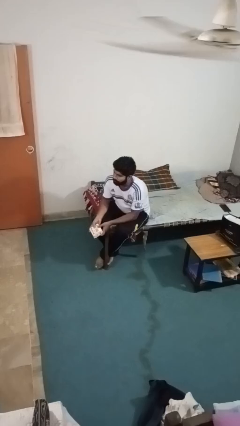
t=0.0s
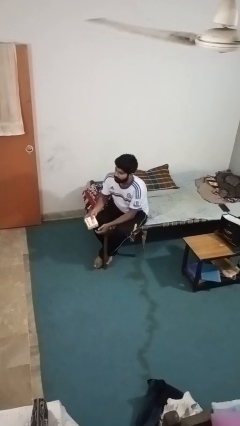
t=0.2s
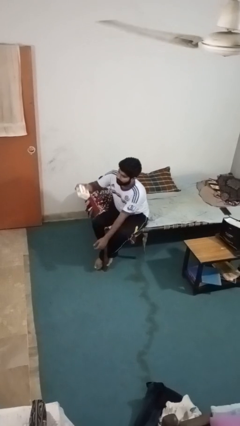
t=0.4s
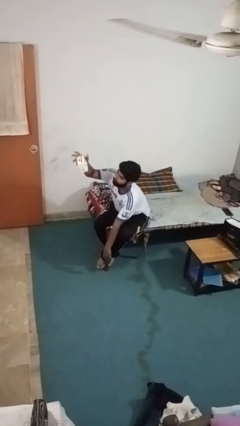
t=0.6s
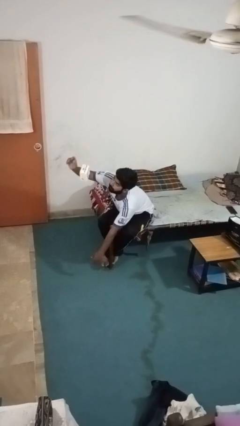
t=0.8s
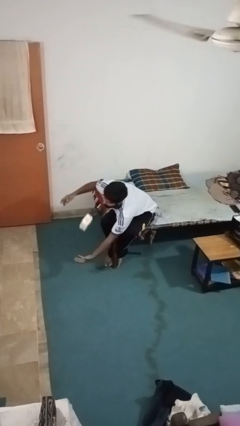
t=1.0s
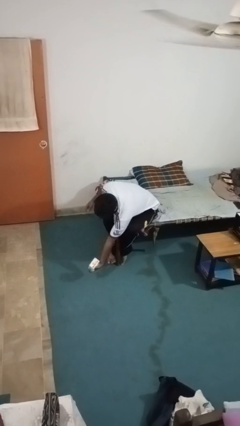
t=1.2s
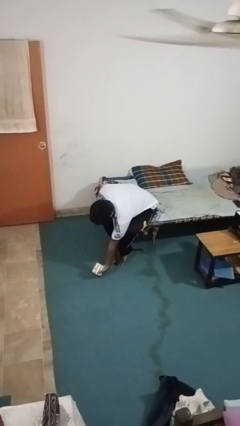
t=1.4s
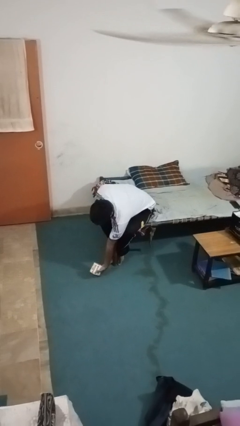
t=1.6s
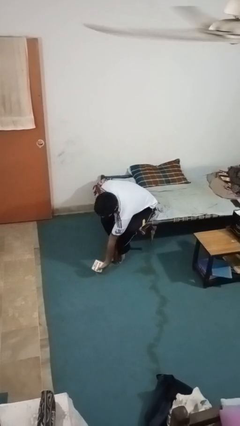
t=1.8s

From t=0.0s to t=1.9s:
person drops object

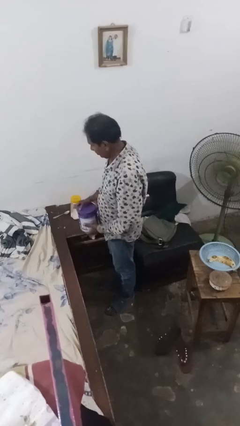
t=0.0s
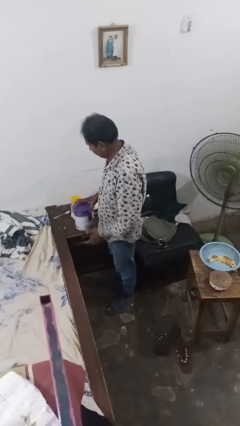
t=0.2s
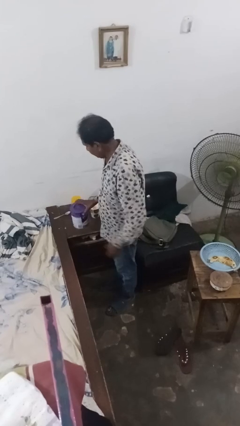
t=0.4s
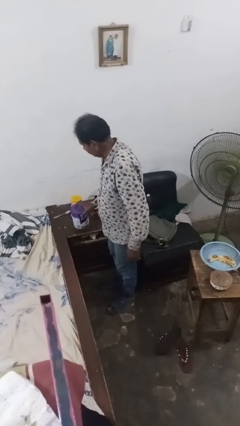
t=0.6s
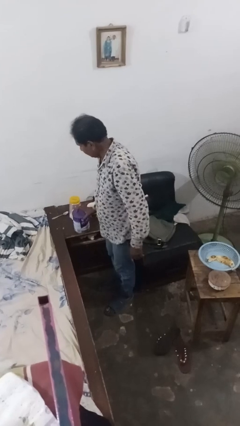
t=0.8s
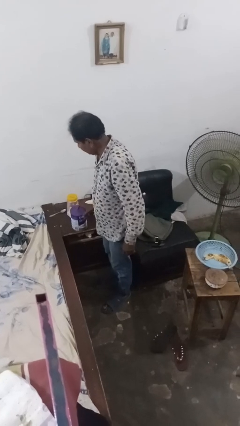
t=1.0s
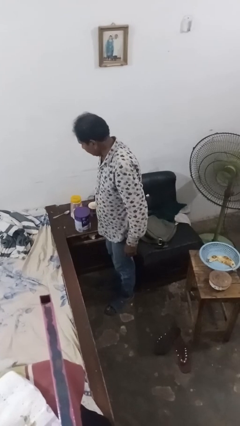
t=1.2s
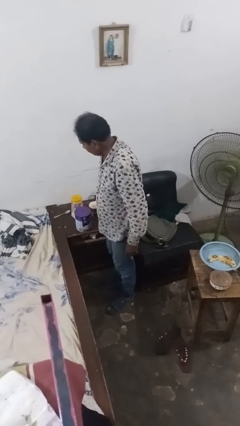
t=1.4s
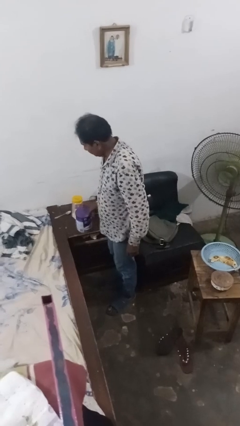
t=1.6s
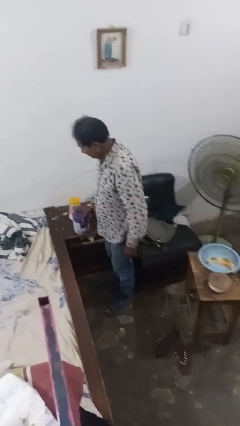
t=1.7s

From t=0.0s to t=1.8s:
person puts down object on bed

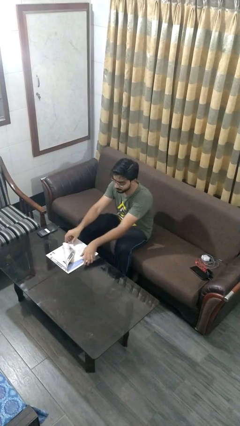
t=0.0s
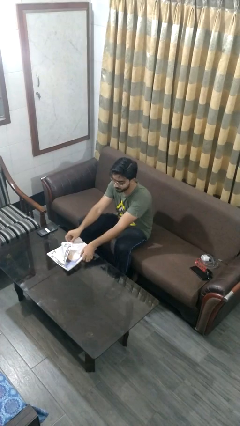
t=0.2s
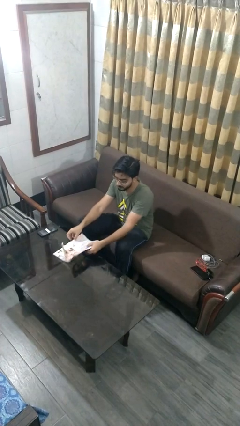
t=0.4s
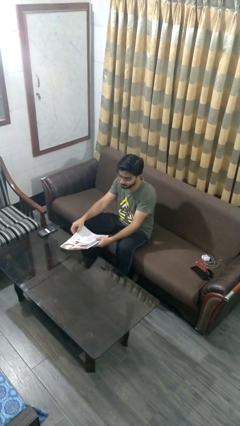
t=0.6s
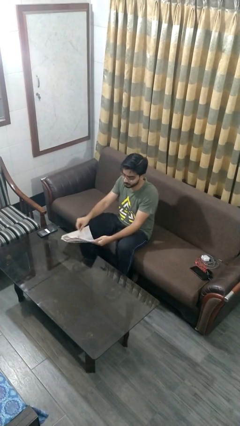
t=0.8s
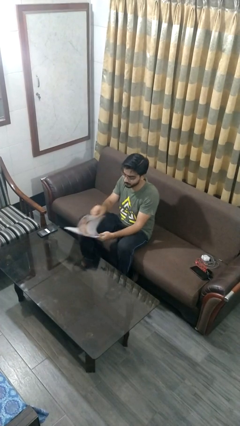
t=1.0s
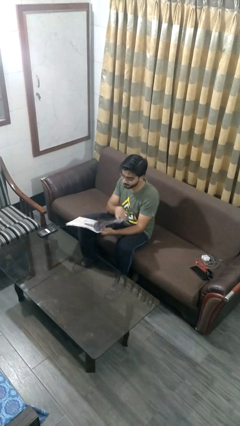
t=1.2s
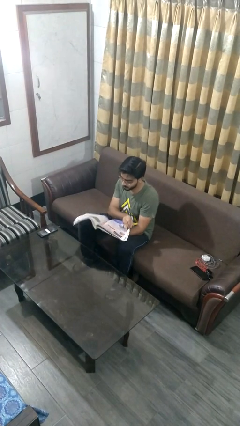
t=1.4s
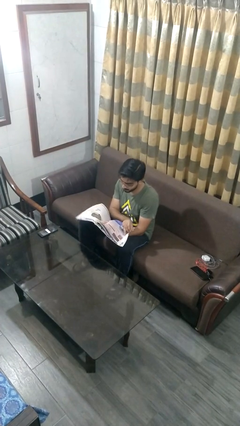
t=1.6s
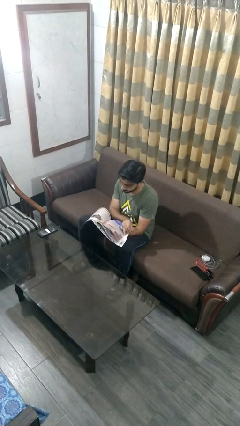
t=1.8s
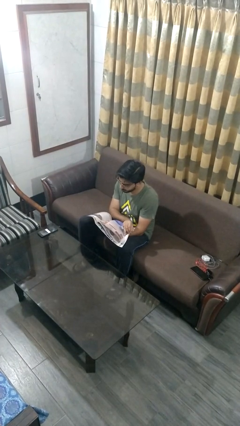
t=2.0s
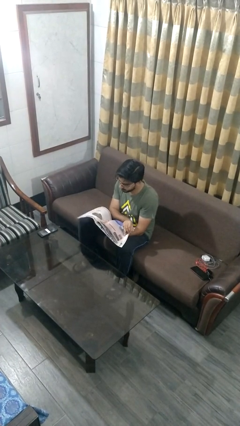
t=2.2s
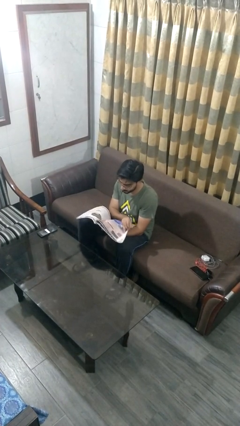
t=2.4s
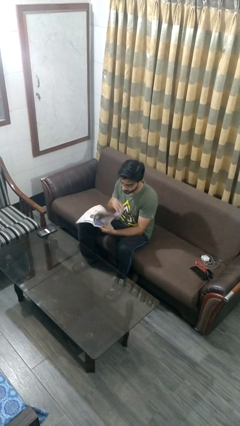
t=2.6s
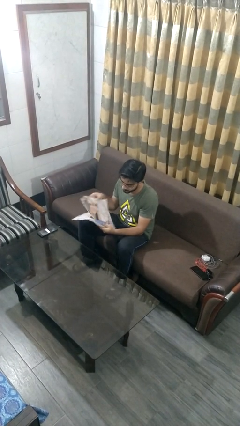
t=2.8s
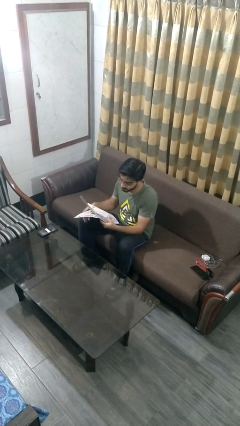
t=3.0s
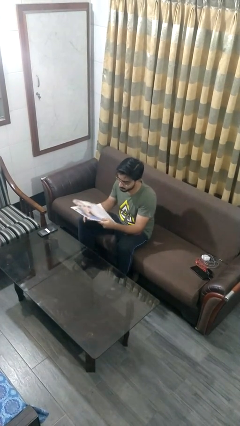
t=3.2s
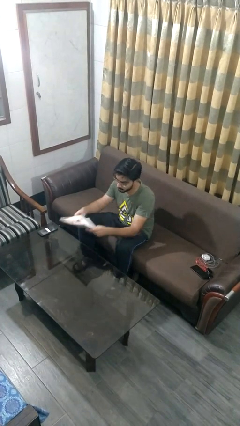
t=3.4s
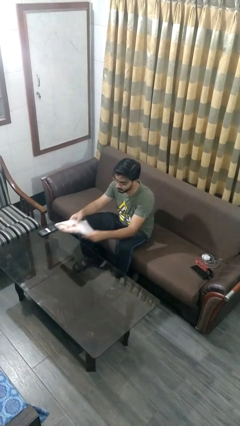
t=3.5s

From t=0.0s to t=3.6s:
person reads magazine

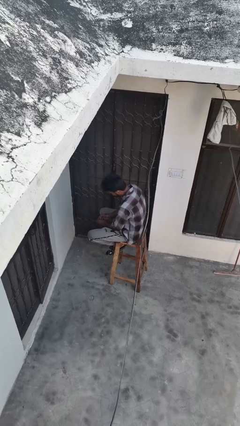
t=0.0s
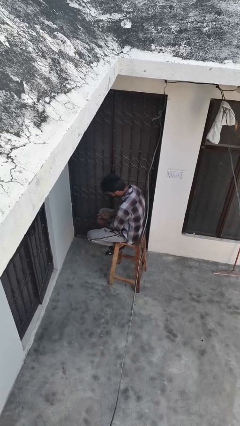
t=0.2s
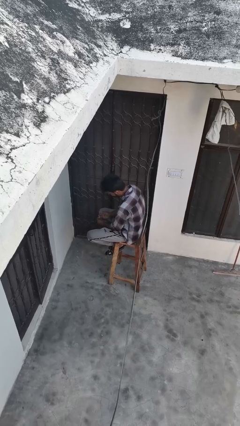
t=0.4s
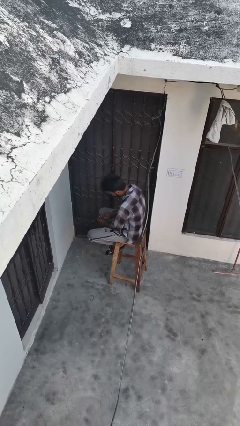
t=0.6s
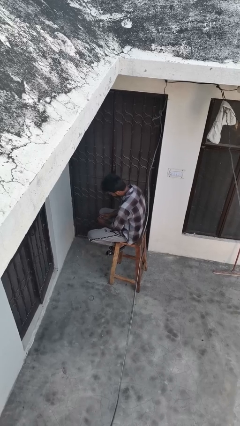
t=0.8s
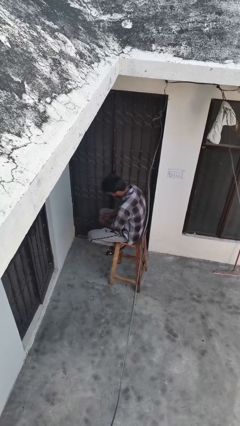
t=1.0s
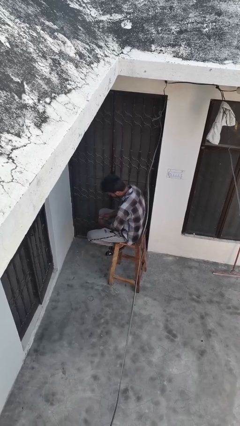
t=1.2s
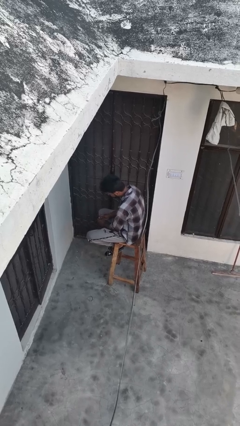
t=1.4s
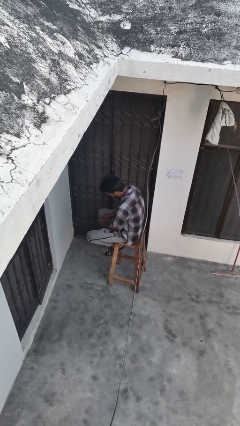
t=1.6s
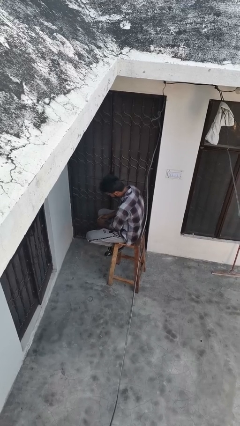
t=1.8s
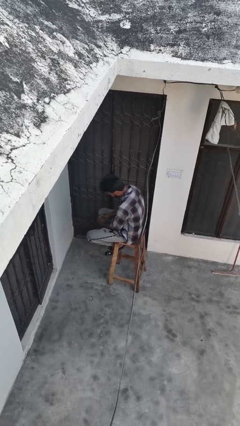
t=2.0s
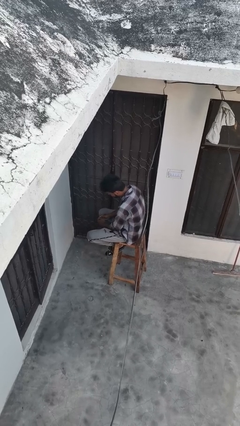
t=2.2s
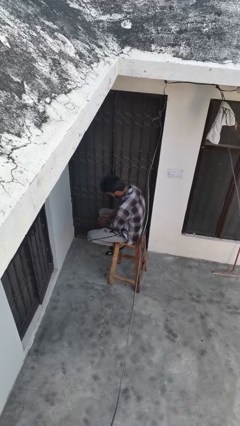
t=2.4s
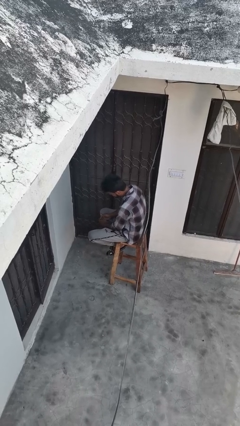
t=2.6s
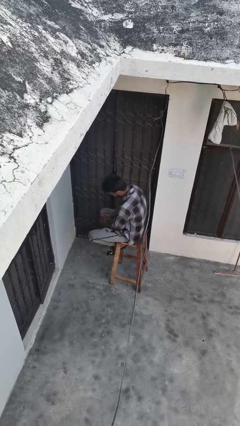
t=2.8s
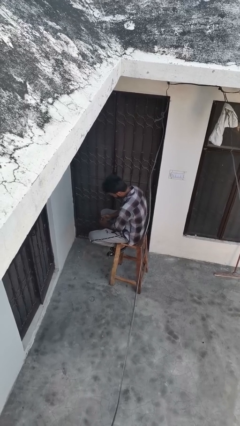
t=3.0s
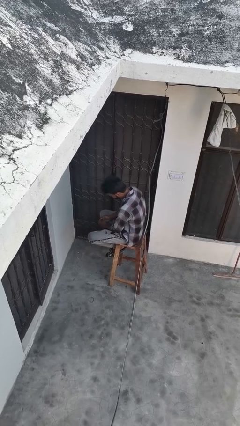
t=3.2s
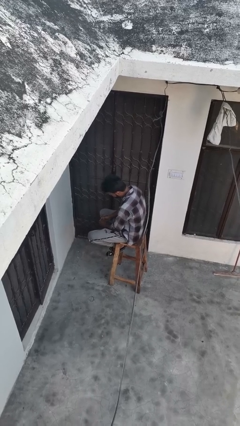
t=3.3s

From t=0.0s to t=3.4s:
person looks at hands in lap

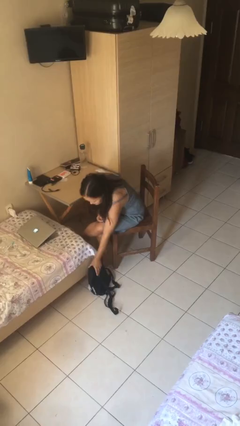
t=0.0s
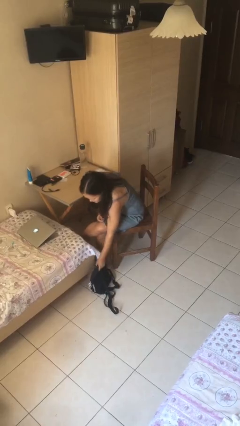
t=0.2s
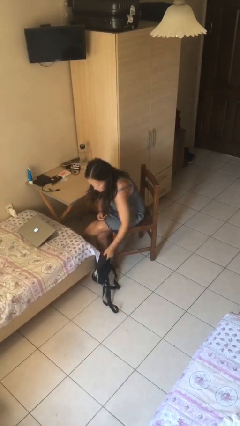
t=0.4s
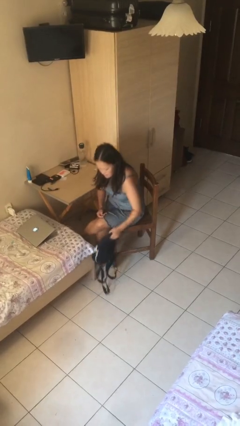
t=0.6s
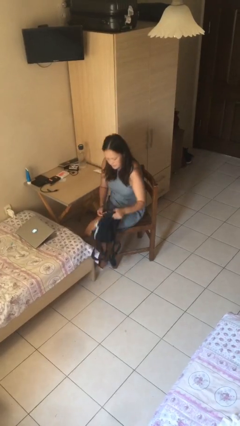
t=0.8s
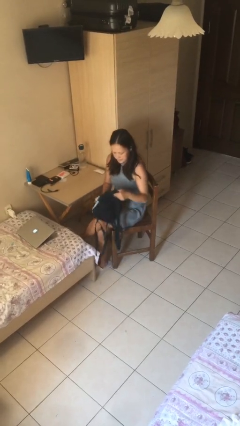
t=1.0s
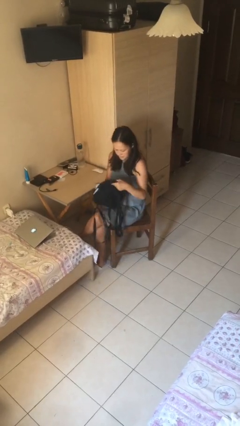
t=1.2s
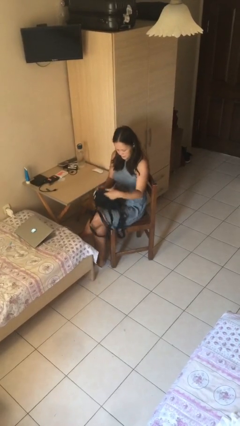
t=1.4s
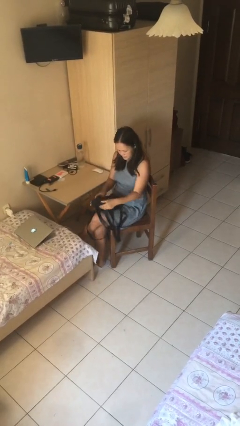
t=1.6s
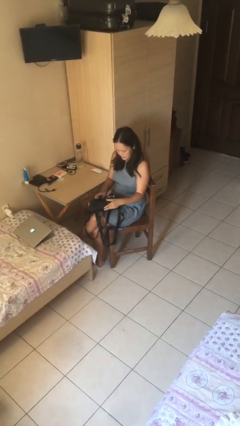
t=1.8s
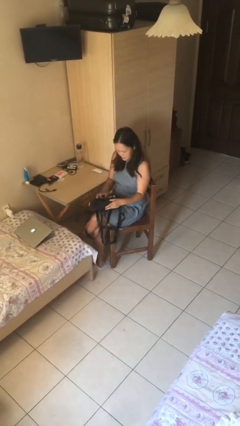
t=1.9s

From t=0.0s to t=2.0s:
person picks up object from floor

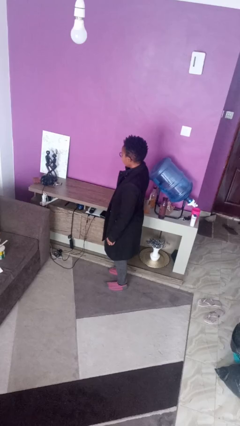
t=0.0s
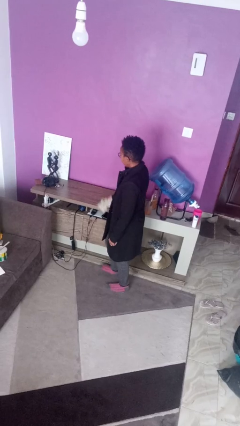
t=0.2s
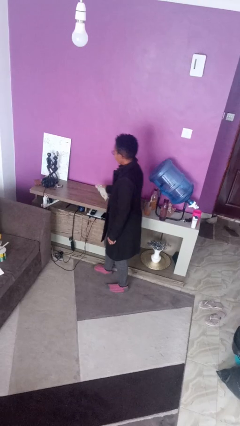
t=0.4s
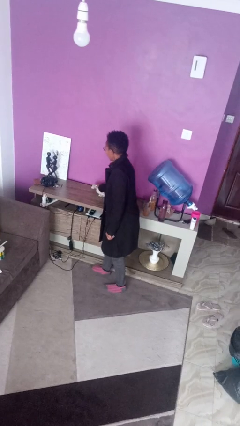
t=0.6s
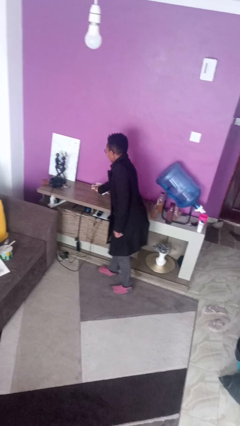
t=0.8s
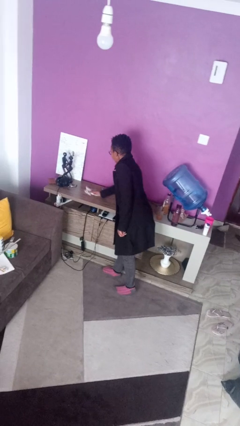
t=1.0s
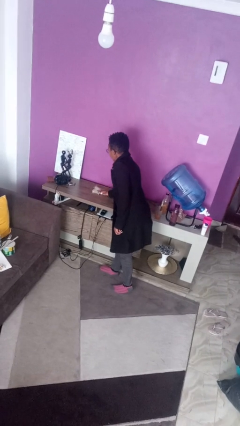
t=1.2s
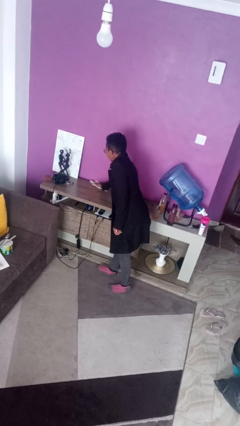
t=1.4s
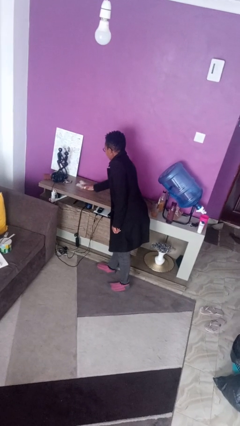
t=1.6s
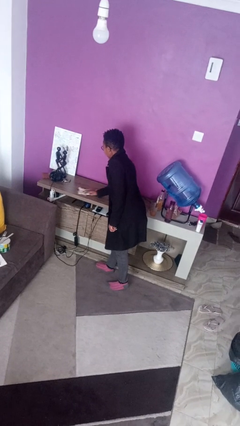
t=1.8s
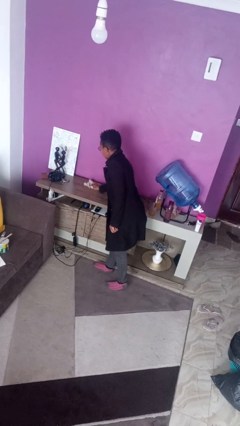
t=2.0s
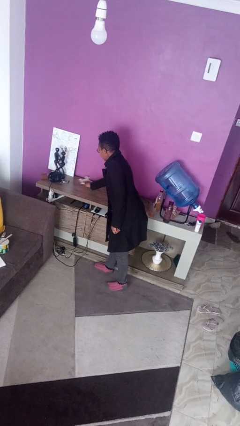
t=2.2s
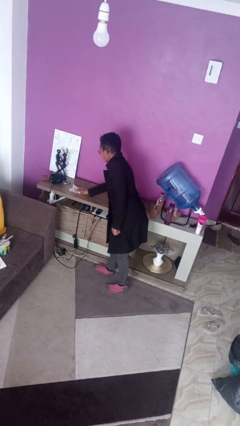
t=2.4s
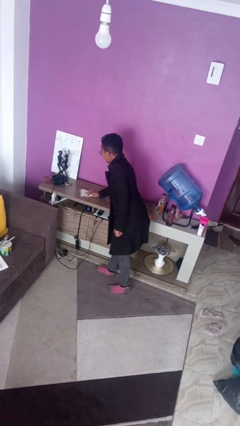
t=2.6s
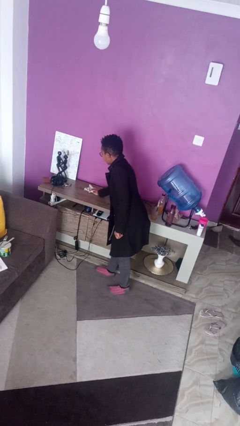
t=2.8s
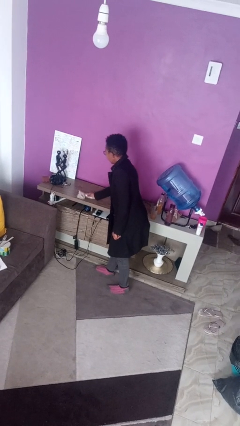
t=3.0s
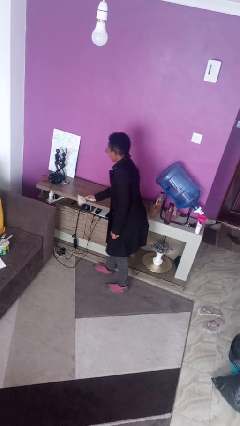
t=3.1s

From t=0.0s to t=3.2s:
person cleans table with rag

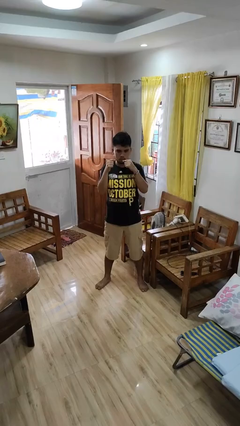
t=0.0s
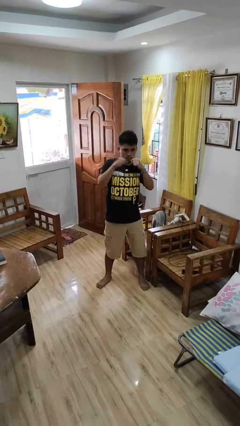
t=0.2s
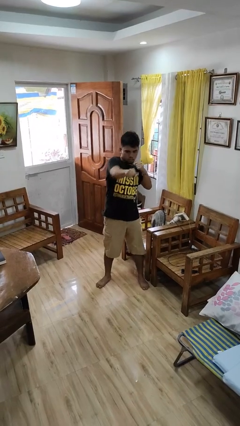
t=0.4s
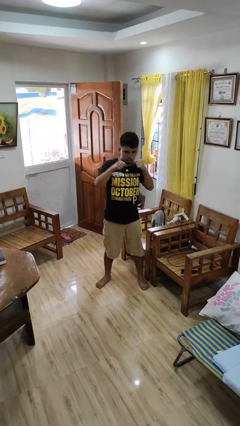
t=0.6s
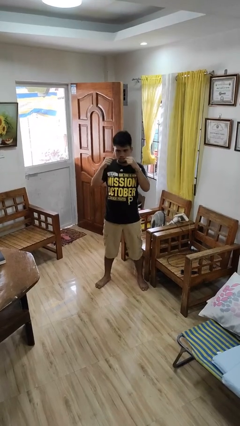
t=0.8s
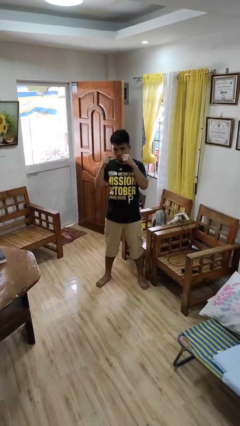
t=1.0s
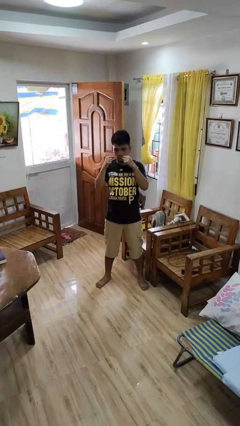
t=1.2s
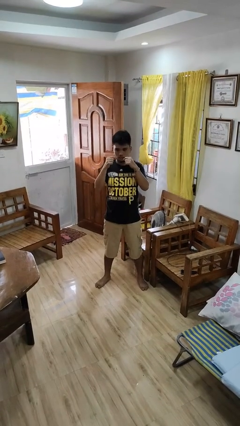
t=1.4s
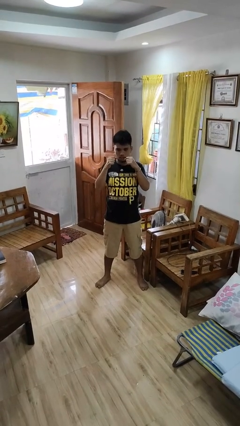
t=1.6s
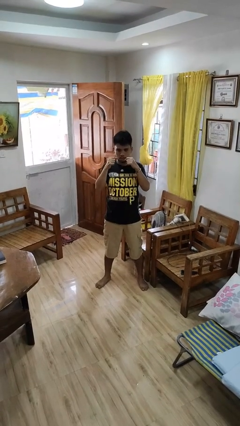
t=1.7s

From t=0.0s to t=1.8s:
person punches
